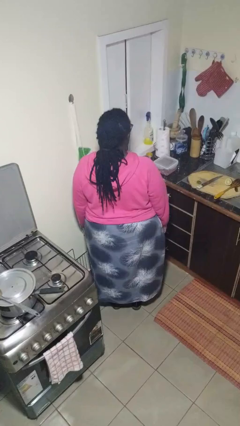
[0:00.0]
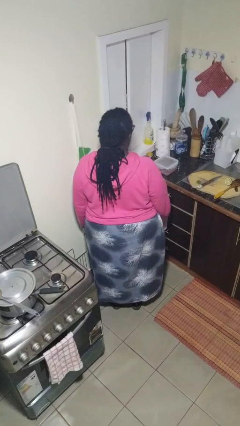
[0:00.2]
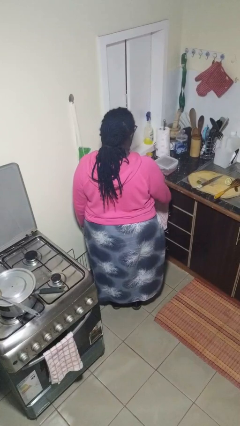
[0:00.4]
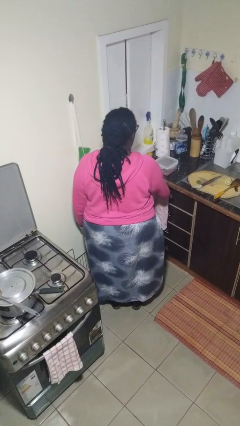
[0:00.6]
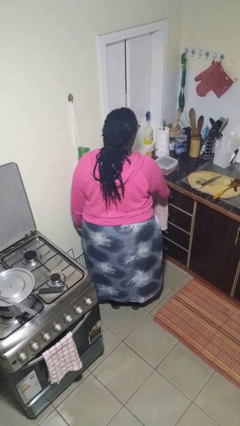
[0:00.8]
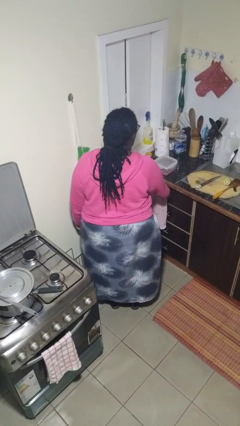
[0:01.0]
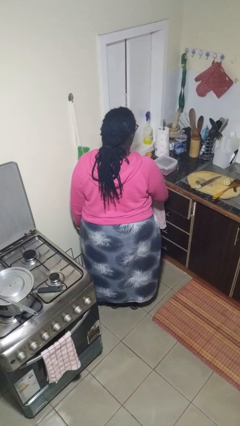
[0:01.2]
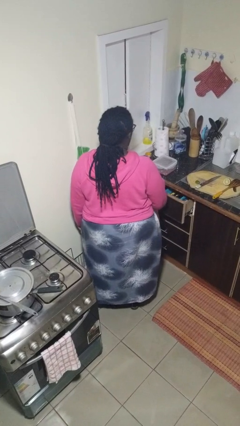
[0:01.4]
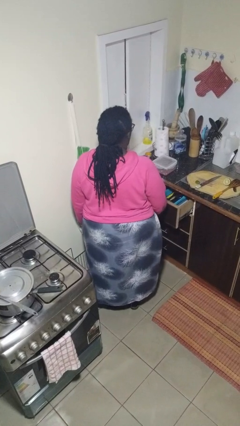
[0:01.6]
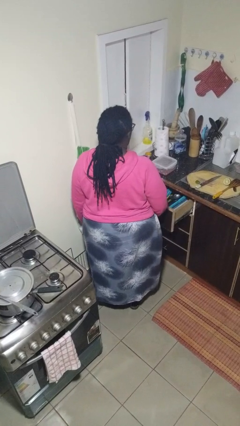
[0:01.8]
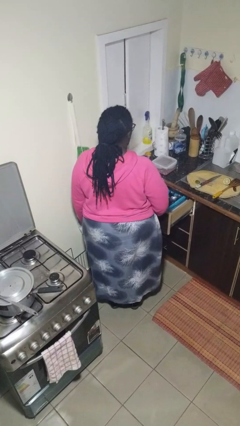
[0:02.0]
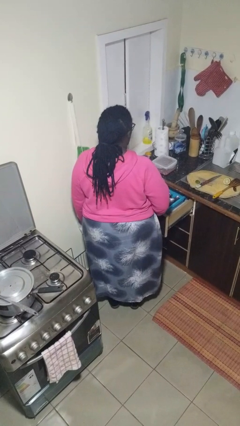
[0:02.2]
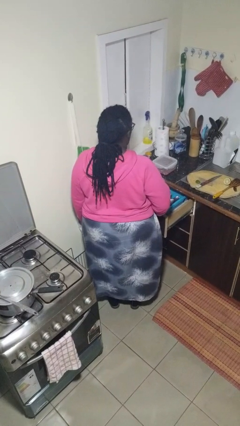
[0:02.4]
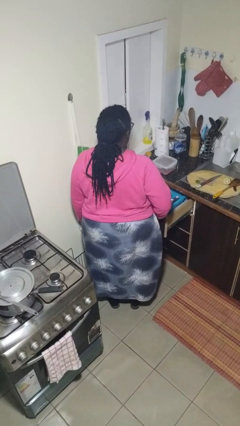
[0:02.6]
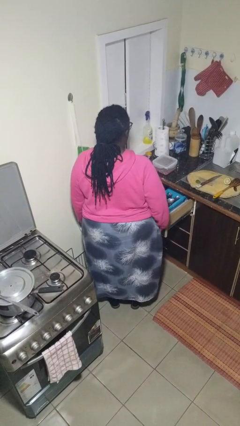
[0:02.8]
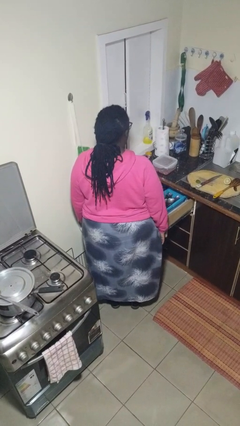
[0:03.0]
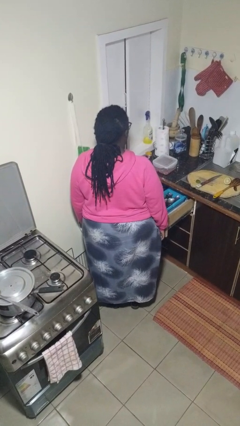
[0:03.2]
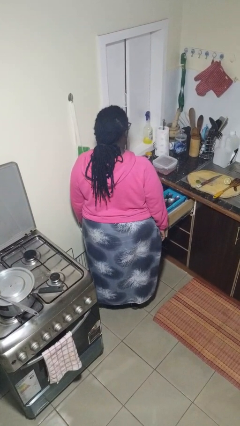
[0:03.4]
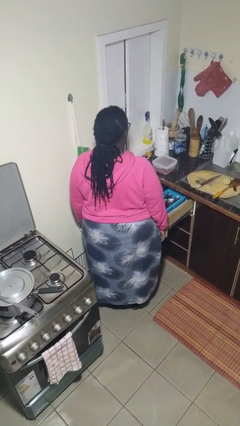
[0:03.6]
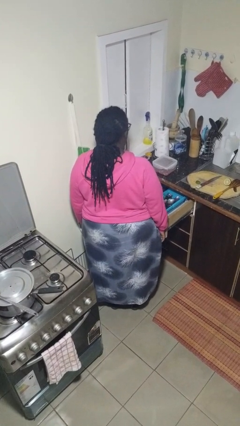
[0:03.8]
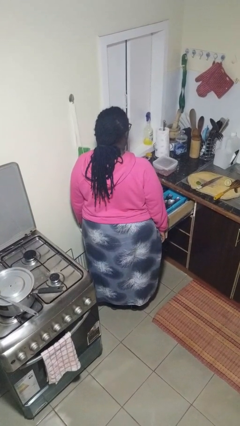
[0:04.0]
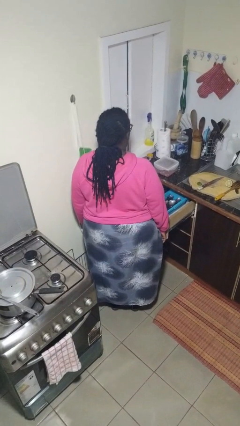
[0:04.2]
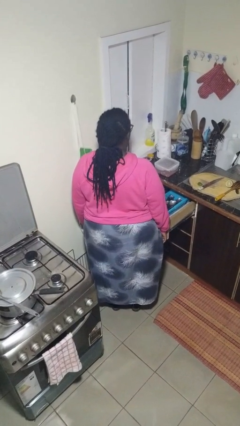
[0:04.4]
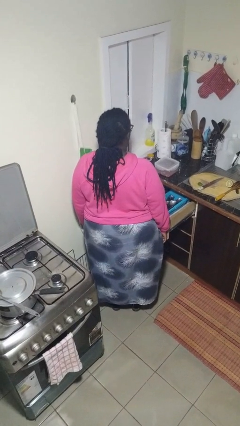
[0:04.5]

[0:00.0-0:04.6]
person opens kitchen drawer

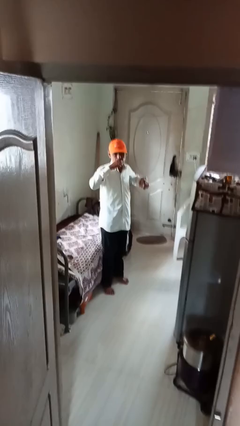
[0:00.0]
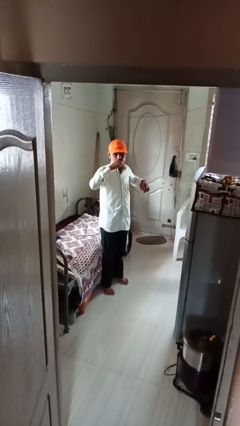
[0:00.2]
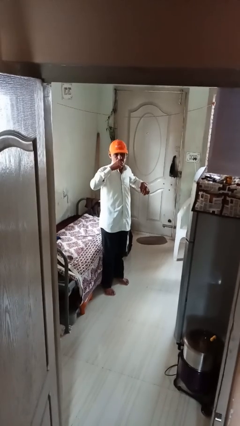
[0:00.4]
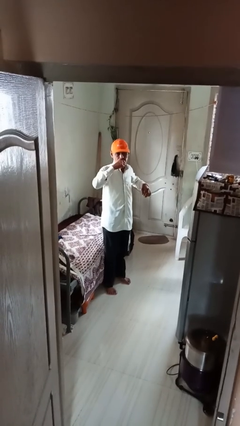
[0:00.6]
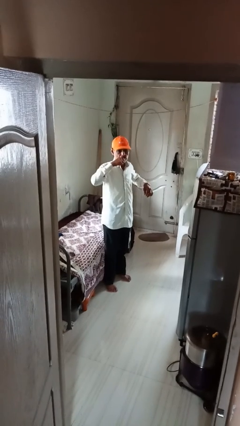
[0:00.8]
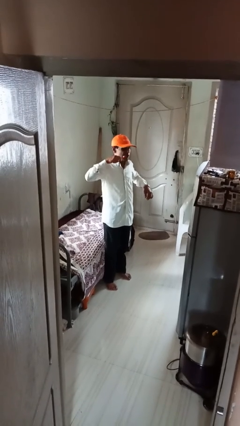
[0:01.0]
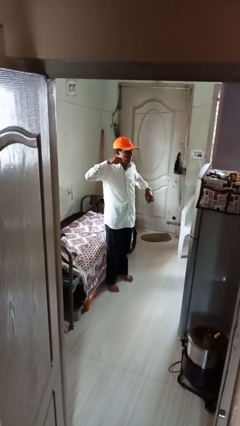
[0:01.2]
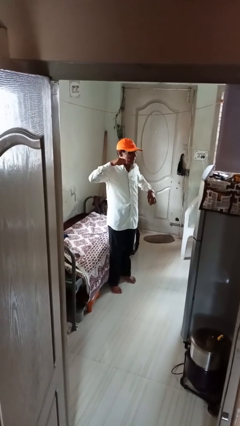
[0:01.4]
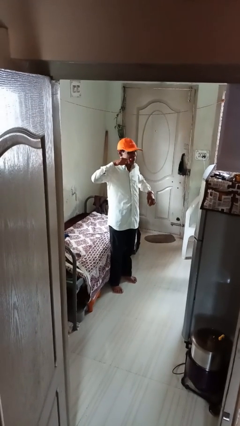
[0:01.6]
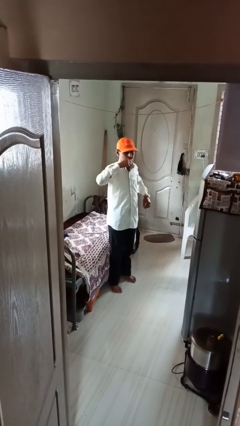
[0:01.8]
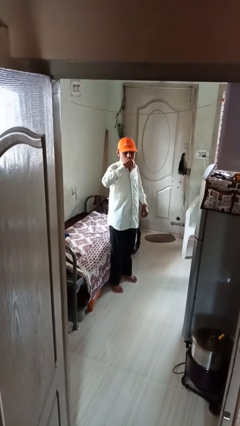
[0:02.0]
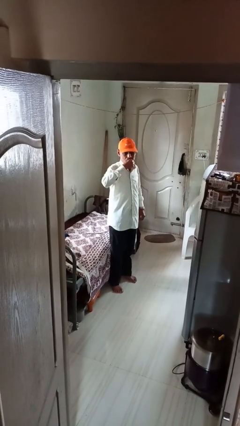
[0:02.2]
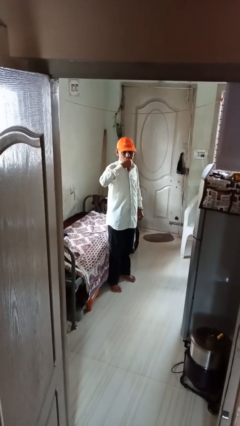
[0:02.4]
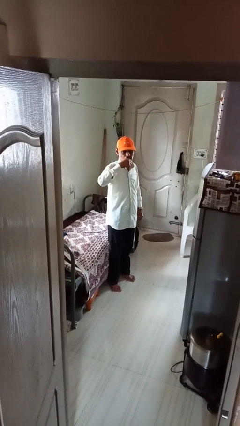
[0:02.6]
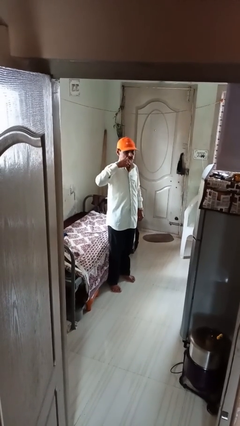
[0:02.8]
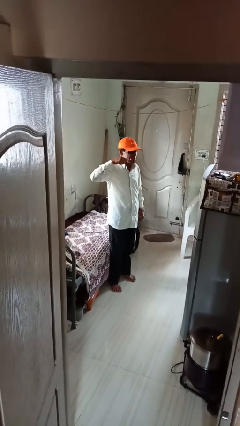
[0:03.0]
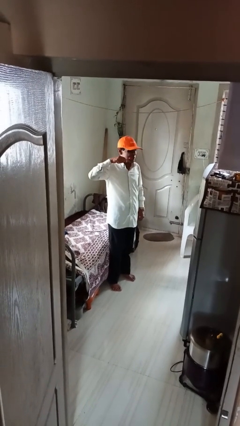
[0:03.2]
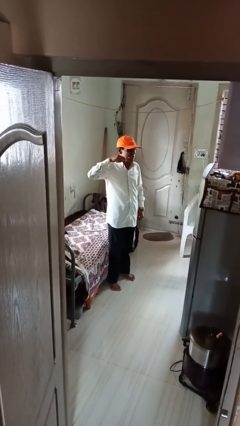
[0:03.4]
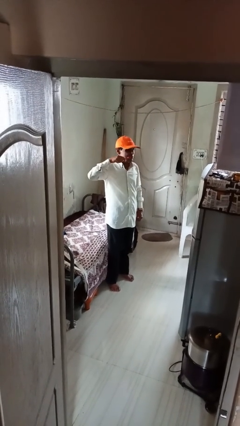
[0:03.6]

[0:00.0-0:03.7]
person brushes teeth

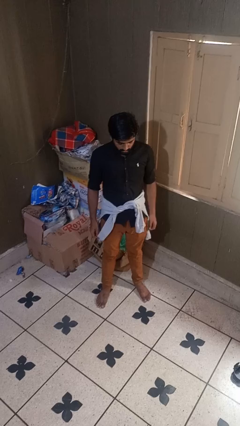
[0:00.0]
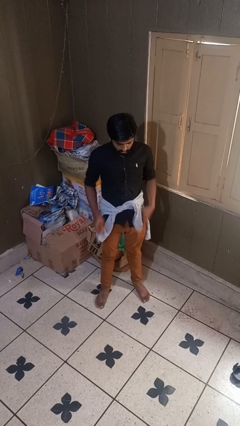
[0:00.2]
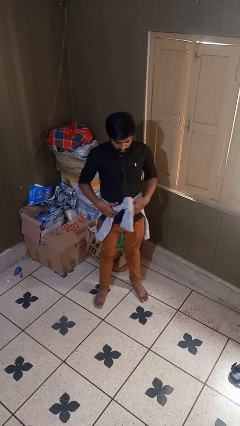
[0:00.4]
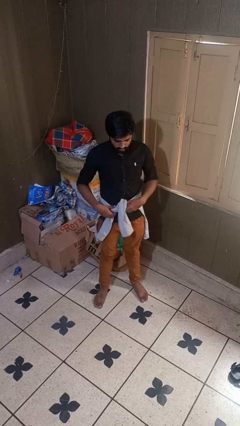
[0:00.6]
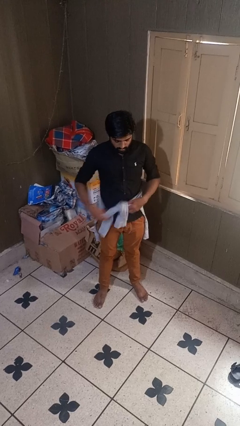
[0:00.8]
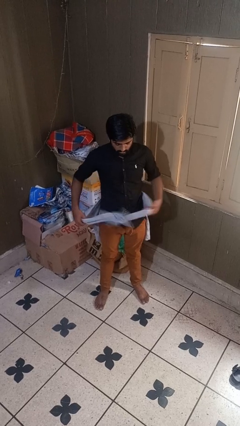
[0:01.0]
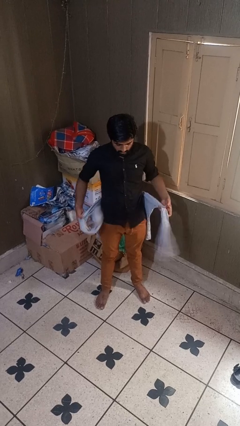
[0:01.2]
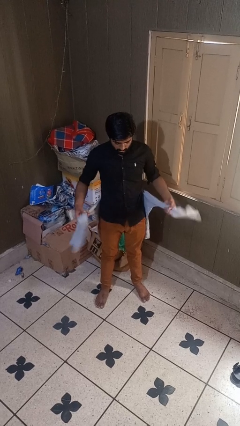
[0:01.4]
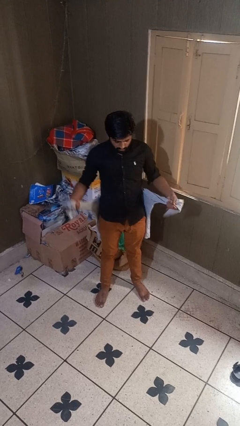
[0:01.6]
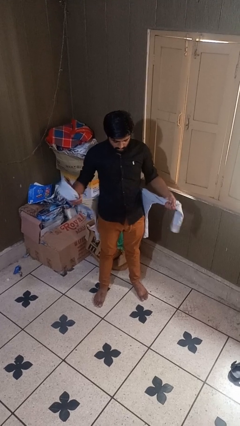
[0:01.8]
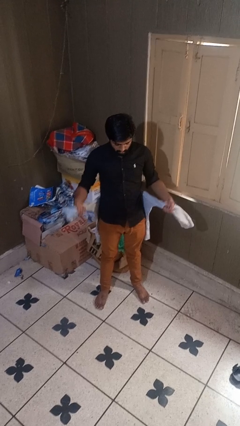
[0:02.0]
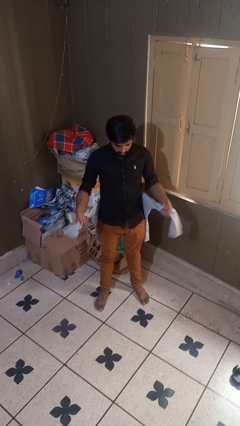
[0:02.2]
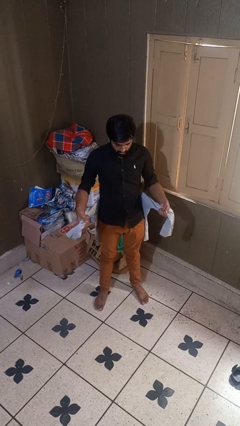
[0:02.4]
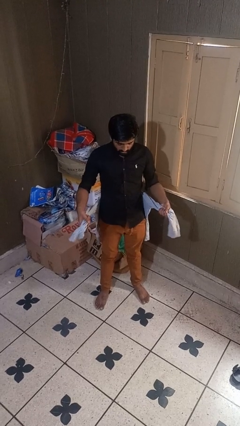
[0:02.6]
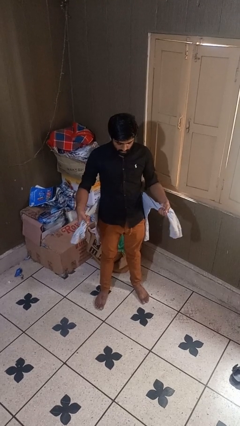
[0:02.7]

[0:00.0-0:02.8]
person unties jacket around waist

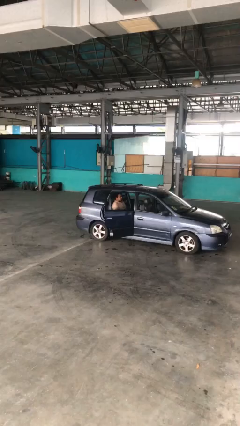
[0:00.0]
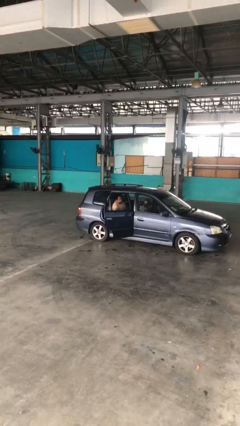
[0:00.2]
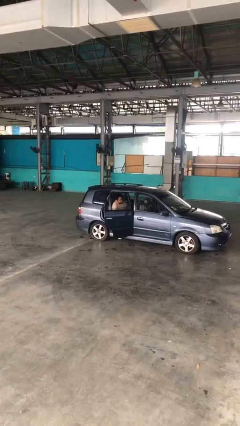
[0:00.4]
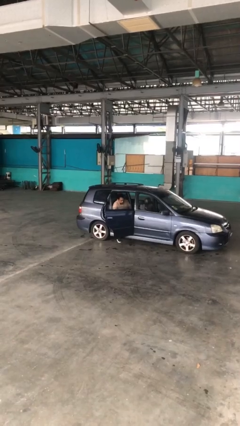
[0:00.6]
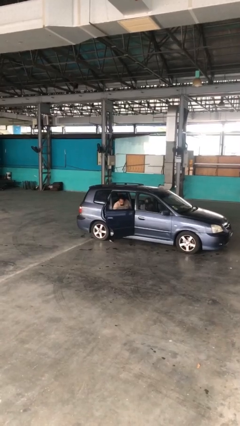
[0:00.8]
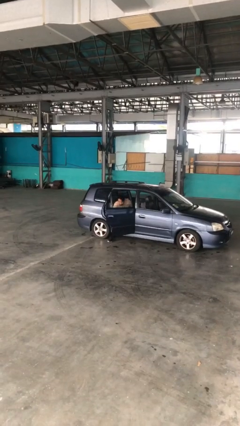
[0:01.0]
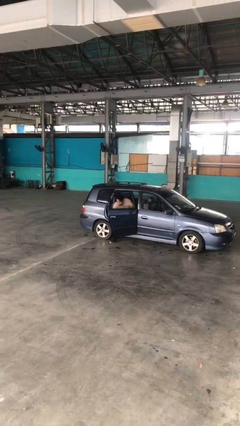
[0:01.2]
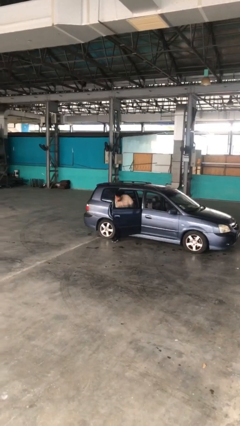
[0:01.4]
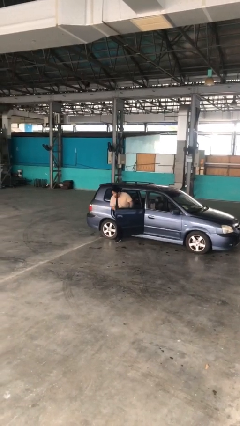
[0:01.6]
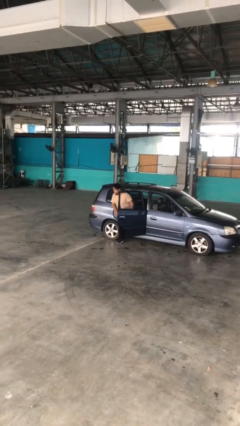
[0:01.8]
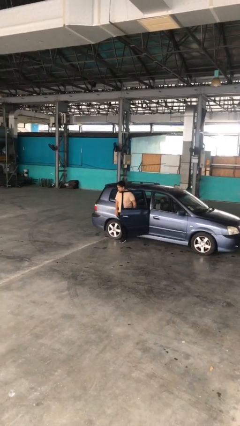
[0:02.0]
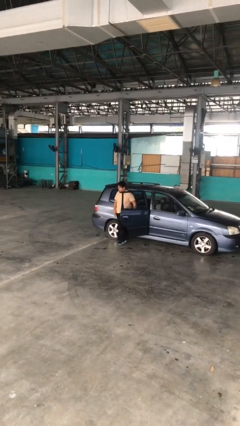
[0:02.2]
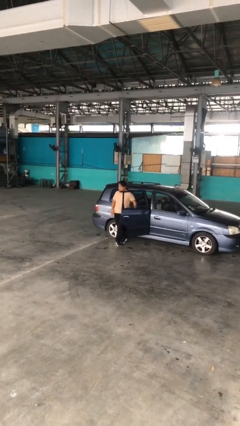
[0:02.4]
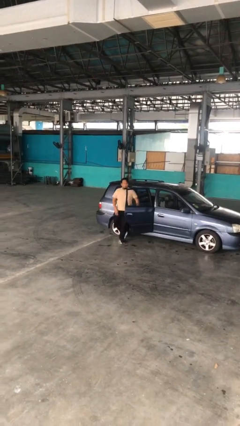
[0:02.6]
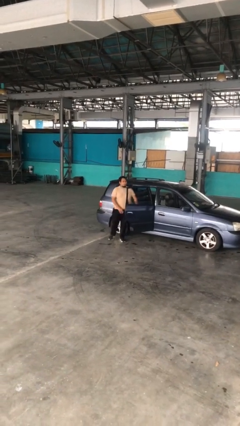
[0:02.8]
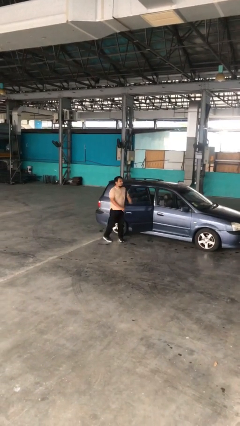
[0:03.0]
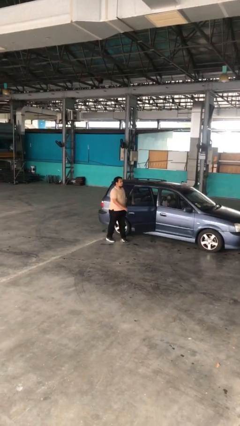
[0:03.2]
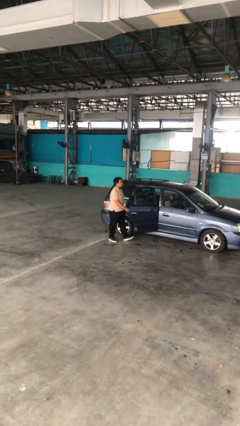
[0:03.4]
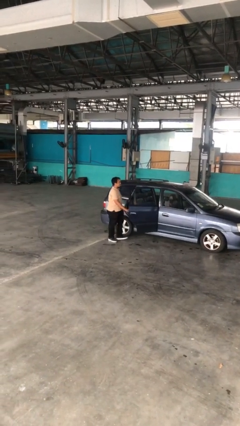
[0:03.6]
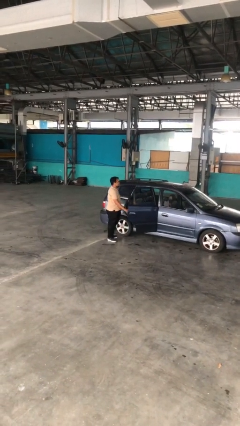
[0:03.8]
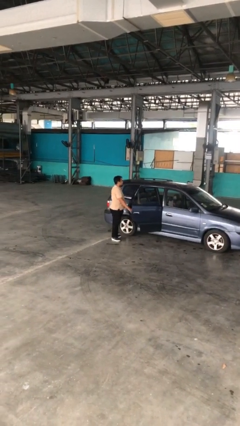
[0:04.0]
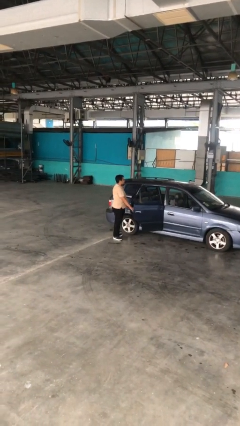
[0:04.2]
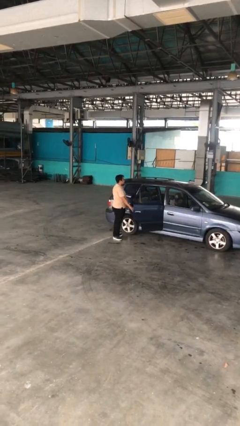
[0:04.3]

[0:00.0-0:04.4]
person exits car

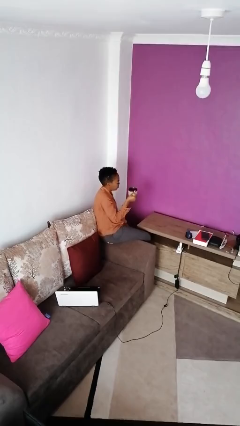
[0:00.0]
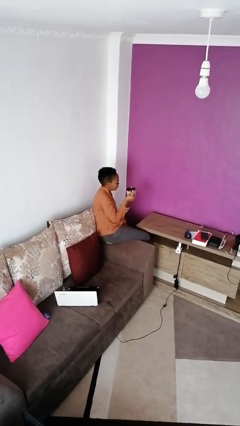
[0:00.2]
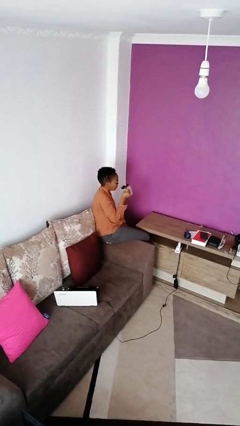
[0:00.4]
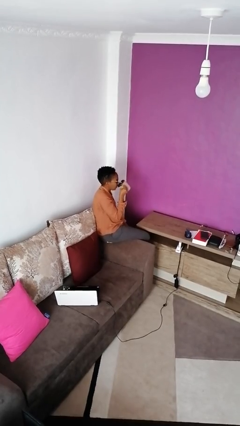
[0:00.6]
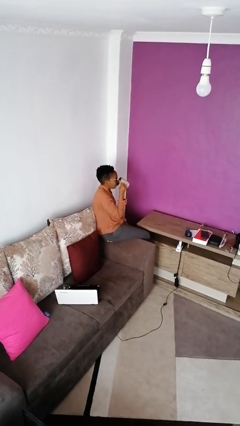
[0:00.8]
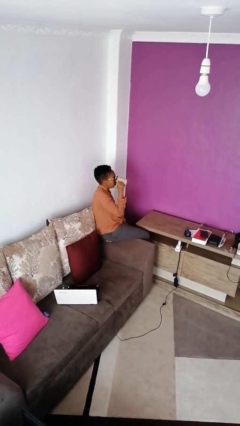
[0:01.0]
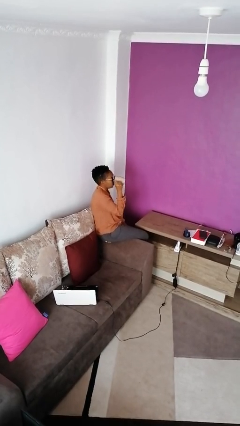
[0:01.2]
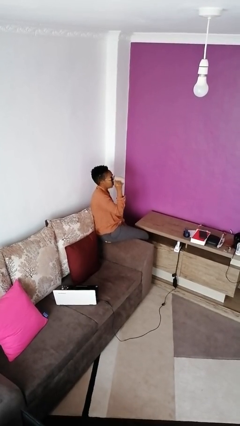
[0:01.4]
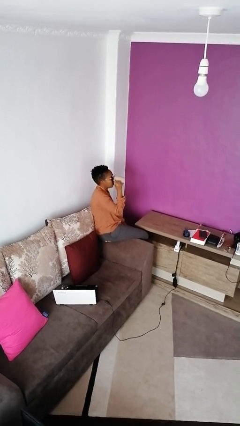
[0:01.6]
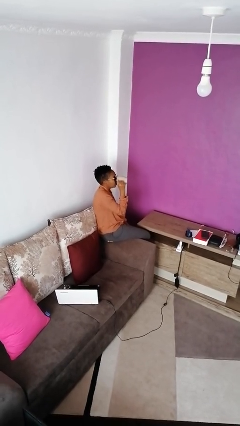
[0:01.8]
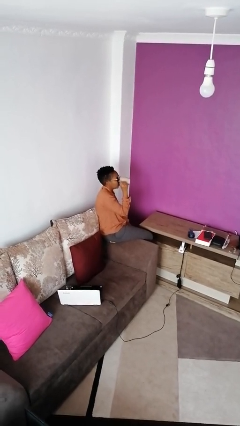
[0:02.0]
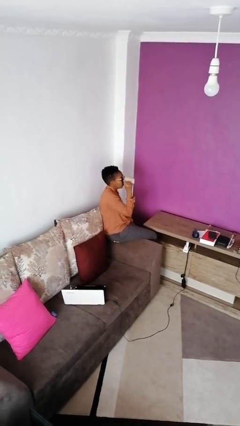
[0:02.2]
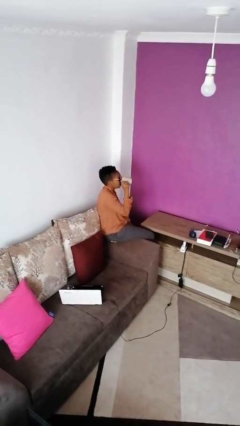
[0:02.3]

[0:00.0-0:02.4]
person drinks from mug
